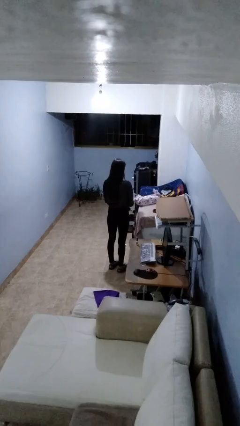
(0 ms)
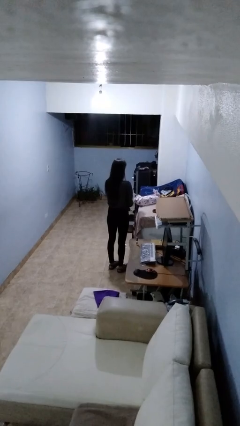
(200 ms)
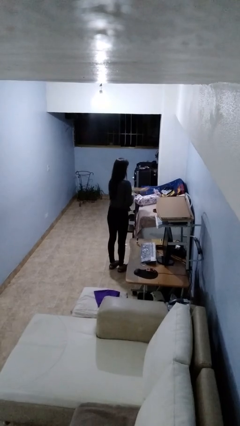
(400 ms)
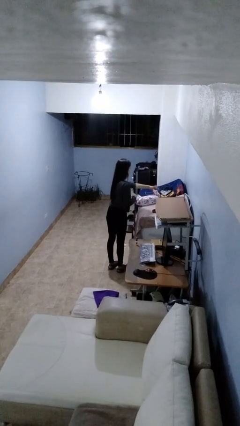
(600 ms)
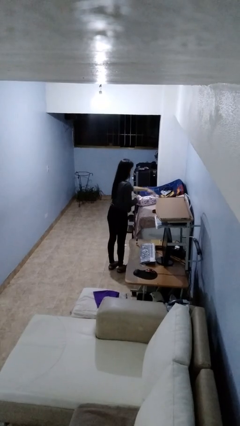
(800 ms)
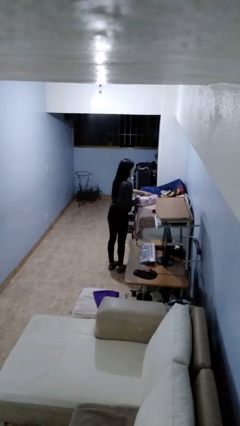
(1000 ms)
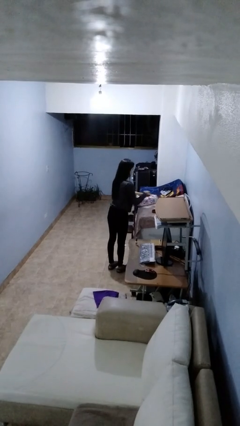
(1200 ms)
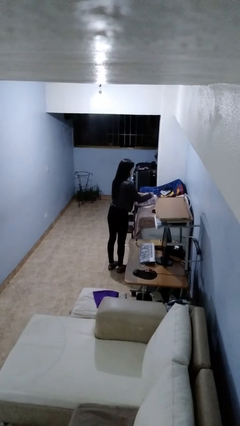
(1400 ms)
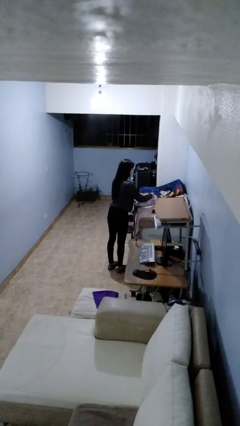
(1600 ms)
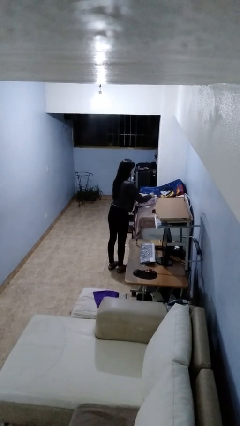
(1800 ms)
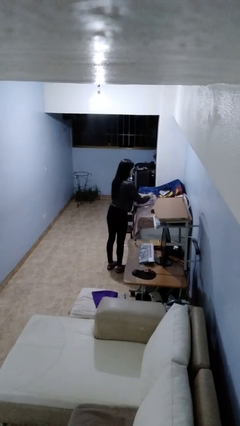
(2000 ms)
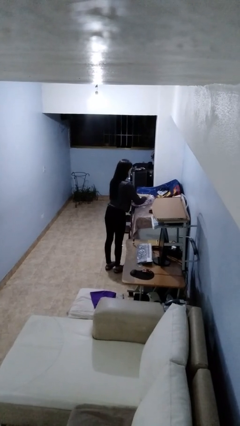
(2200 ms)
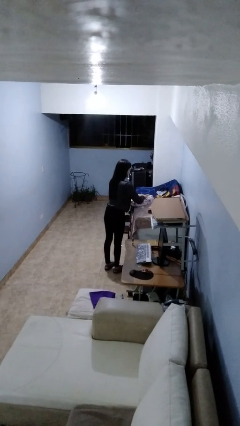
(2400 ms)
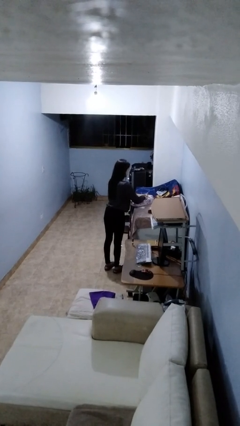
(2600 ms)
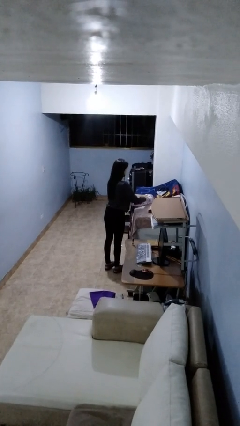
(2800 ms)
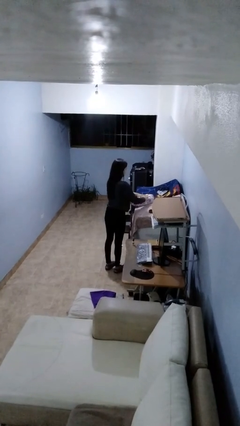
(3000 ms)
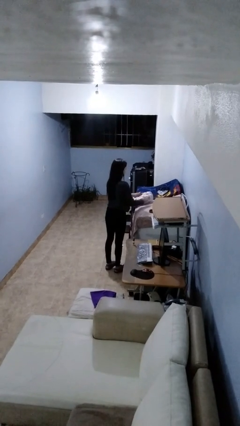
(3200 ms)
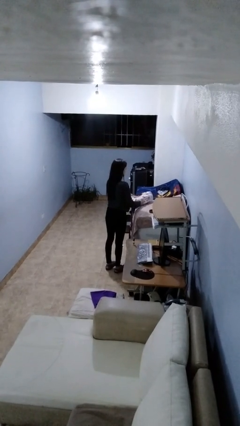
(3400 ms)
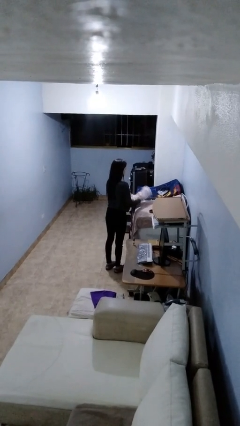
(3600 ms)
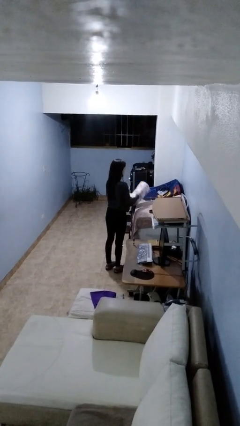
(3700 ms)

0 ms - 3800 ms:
person wraps box

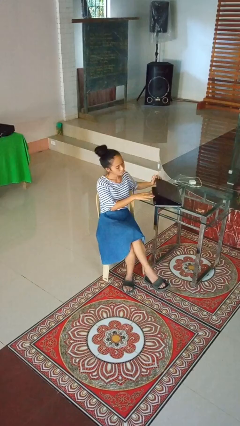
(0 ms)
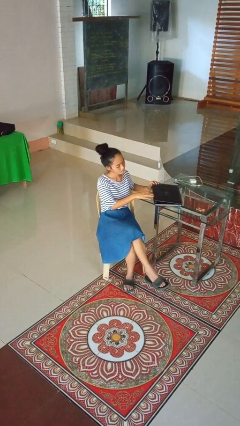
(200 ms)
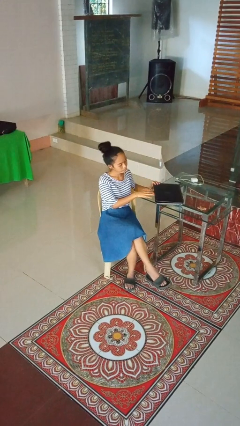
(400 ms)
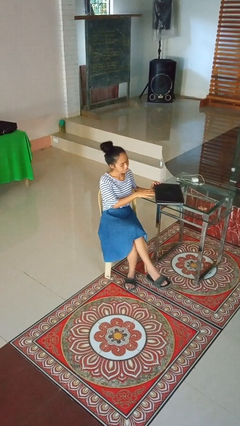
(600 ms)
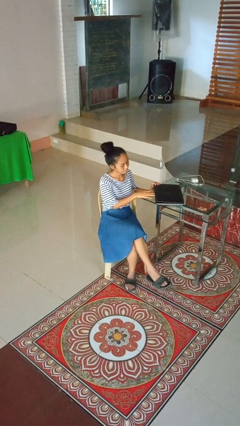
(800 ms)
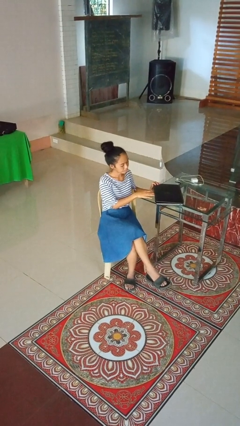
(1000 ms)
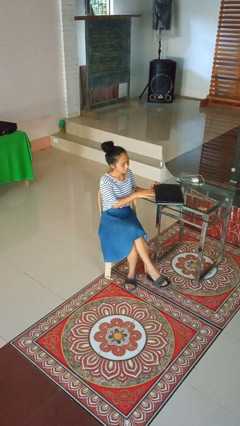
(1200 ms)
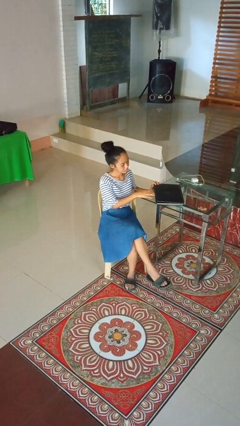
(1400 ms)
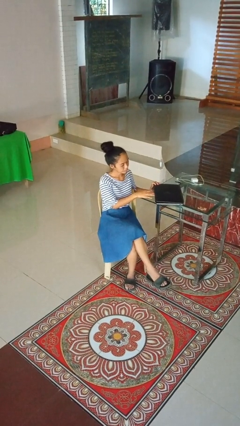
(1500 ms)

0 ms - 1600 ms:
person closes laptop

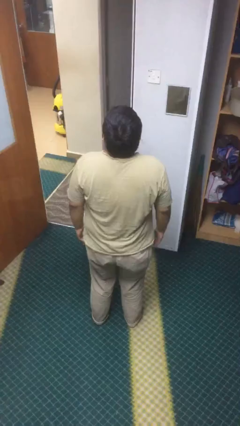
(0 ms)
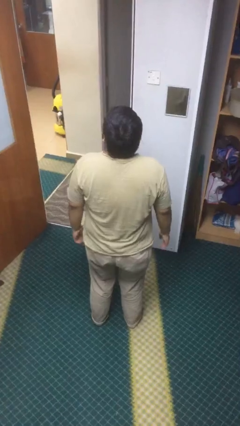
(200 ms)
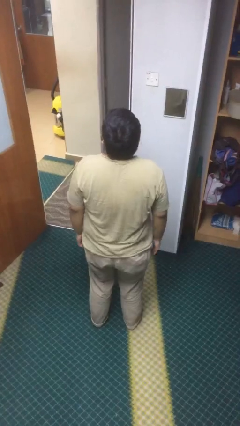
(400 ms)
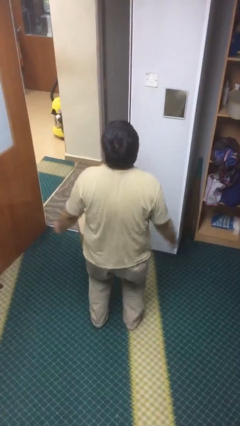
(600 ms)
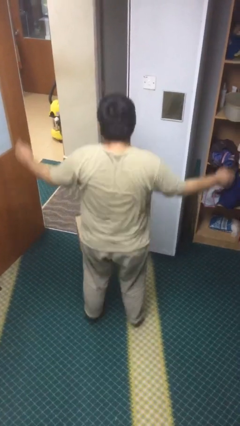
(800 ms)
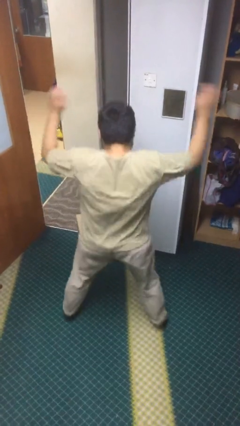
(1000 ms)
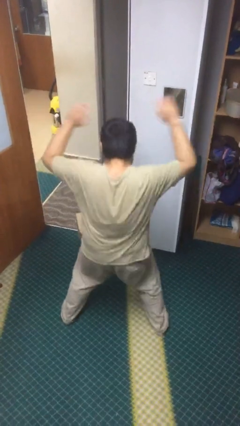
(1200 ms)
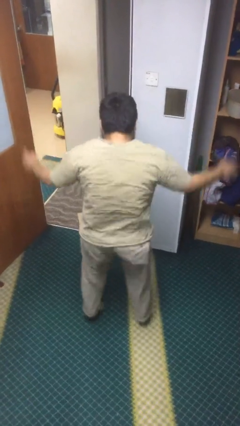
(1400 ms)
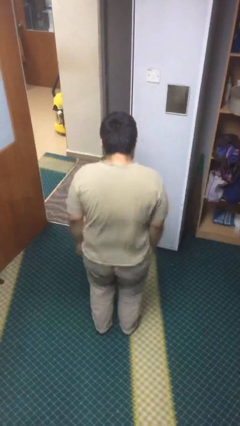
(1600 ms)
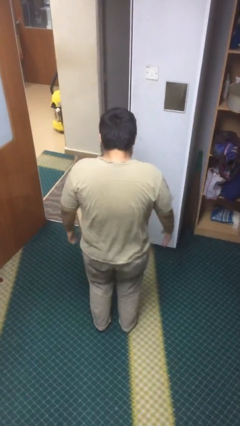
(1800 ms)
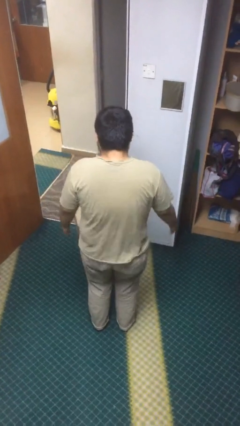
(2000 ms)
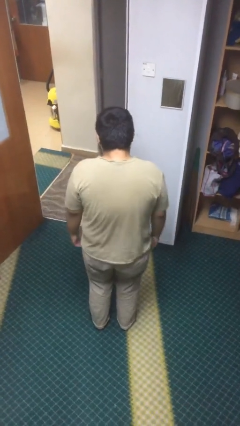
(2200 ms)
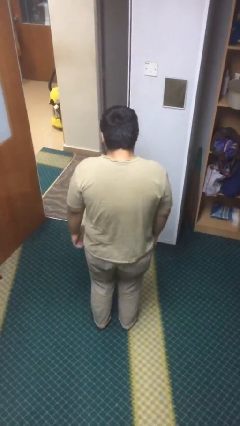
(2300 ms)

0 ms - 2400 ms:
person exercises with jumping jacks

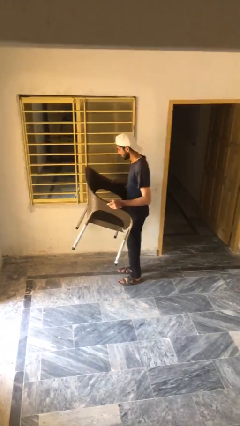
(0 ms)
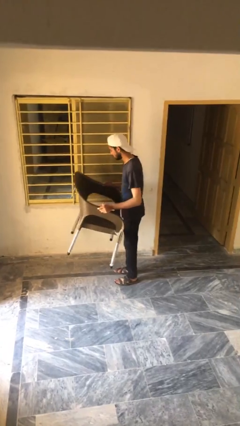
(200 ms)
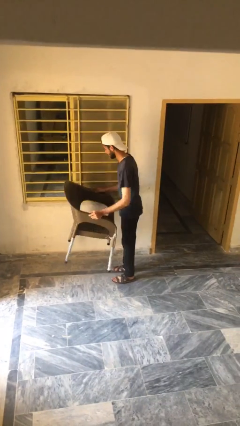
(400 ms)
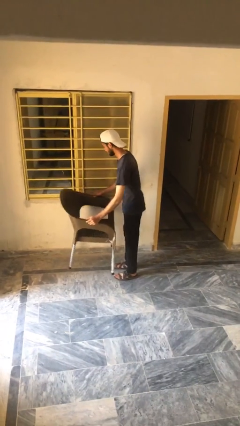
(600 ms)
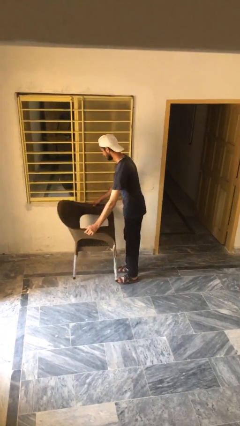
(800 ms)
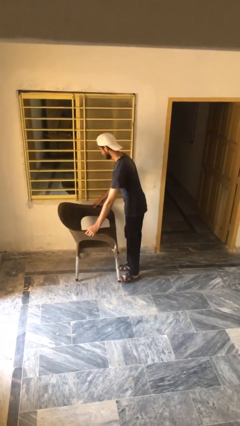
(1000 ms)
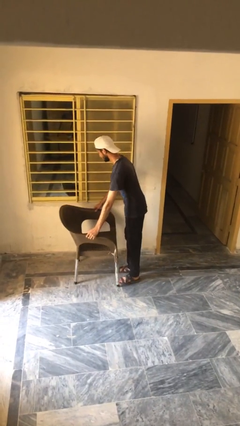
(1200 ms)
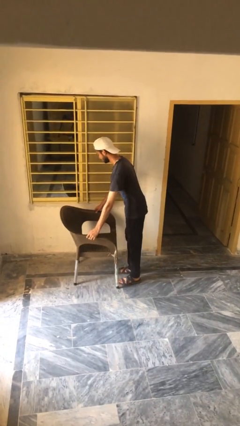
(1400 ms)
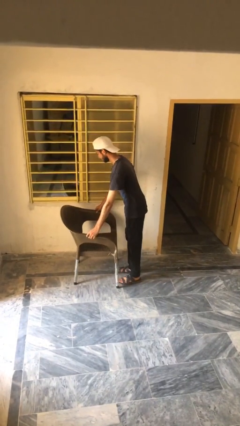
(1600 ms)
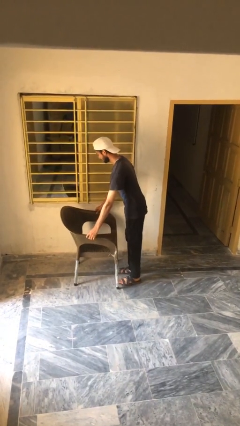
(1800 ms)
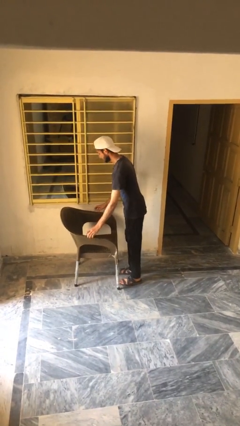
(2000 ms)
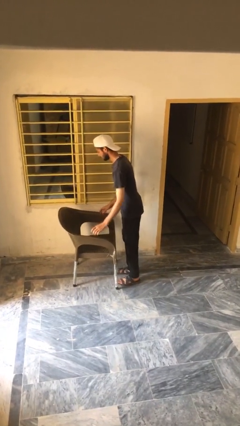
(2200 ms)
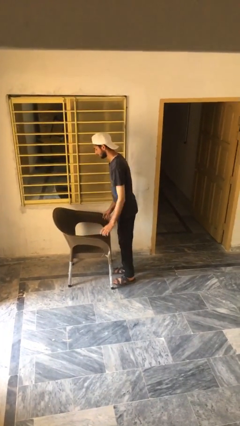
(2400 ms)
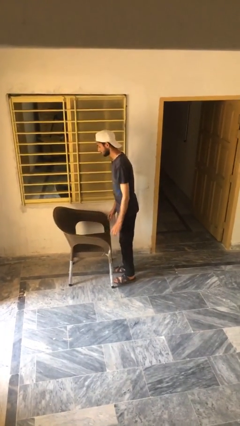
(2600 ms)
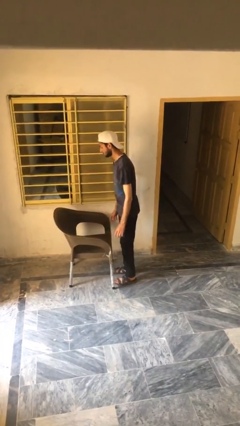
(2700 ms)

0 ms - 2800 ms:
person puts down object on floor

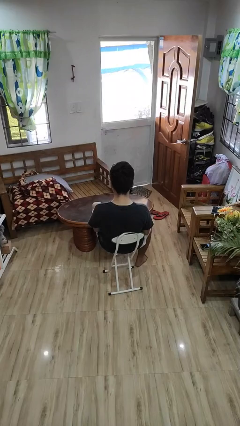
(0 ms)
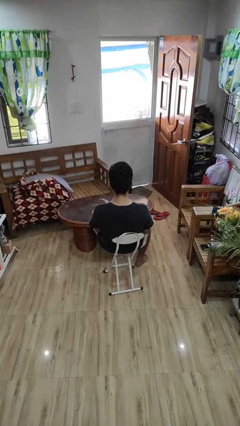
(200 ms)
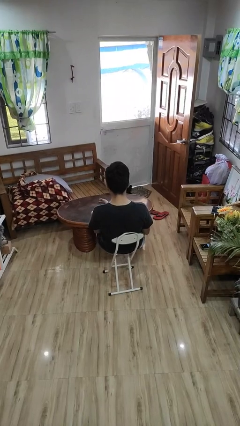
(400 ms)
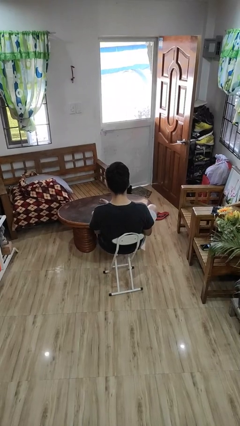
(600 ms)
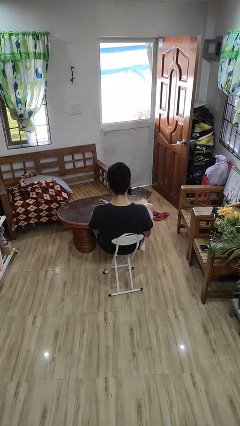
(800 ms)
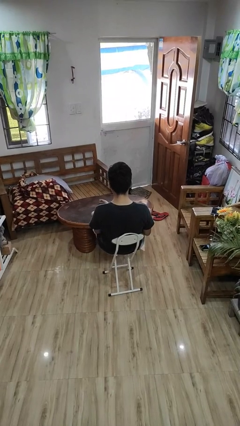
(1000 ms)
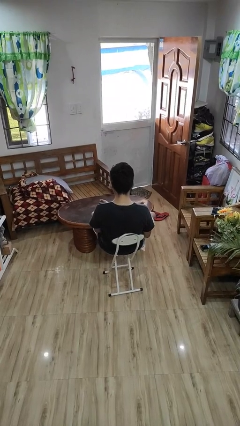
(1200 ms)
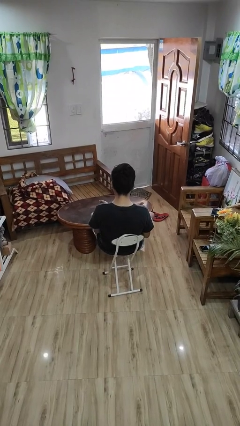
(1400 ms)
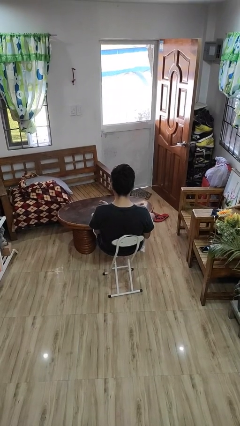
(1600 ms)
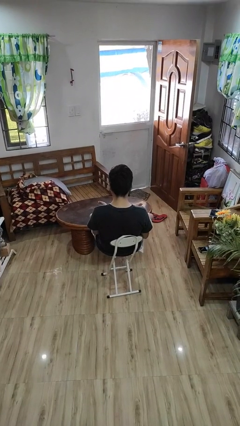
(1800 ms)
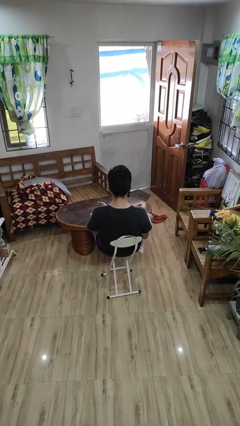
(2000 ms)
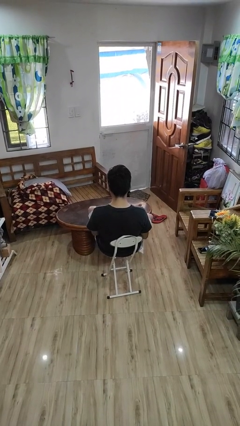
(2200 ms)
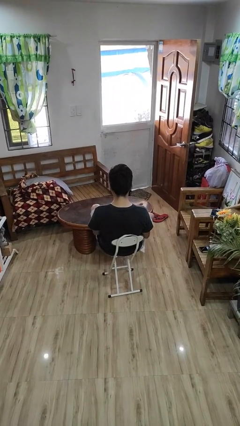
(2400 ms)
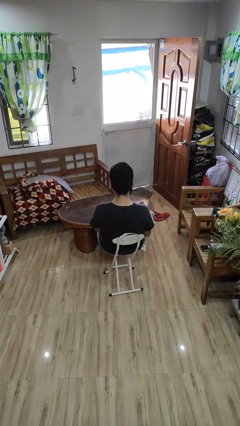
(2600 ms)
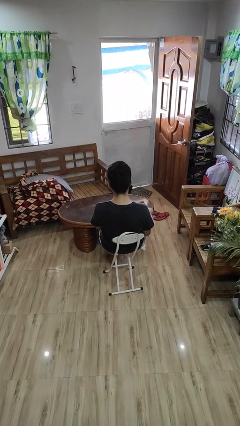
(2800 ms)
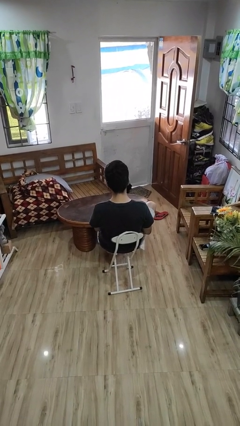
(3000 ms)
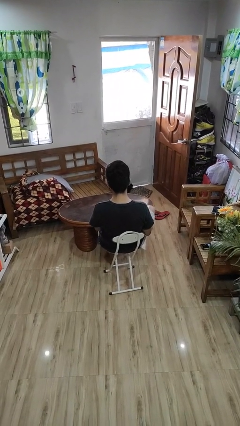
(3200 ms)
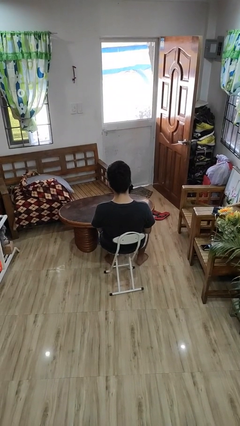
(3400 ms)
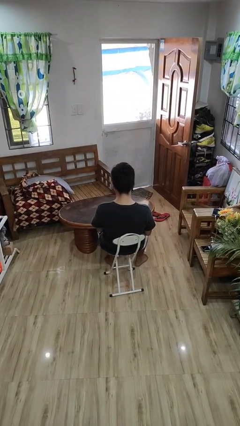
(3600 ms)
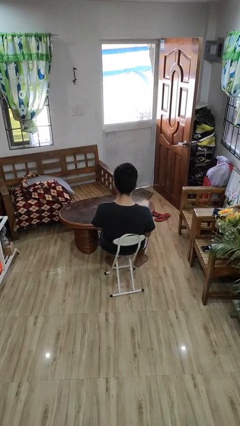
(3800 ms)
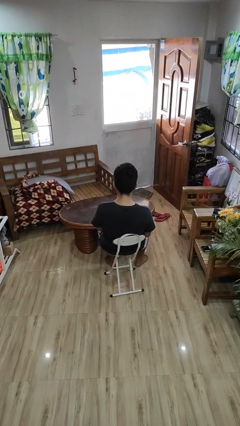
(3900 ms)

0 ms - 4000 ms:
person puts feet up

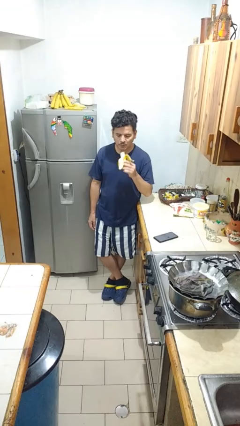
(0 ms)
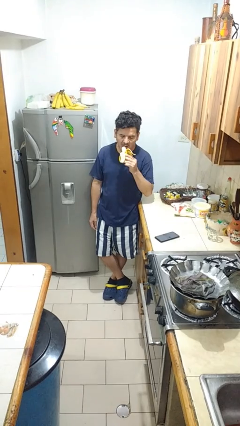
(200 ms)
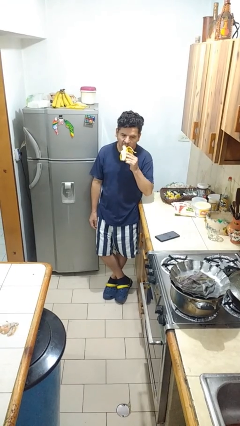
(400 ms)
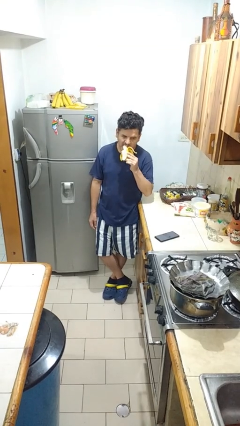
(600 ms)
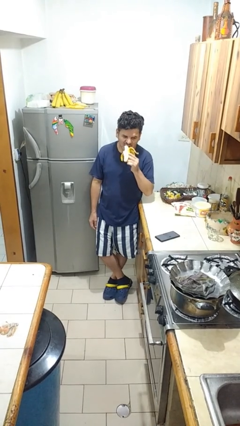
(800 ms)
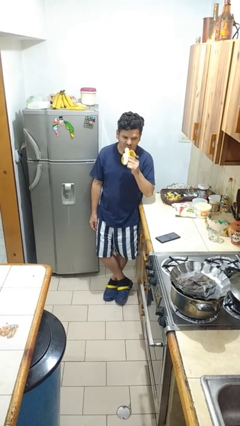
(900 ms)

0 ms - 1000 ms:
person eats banana

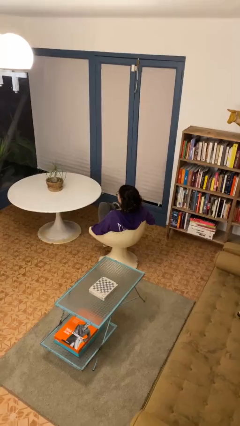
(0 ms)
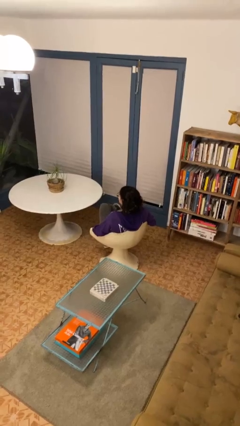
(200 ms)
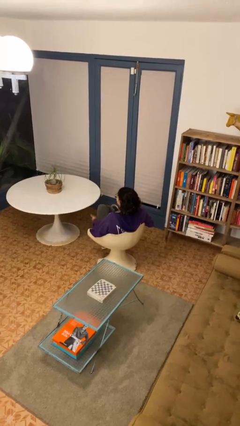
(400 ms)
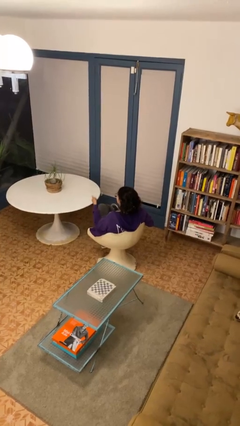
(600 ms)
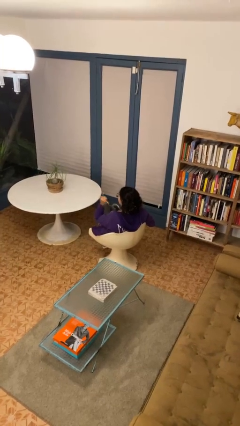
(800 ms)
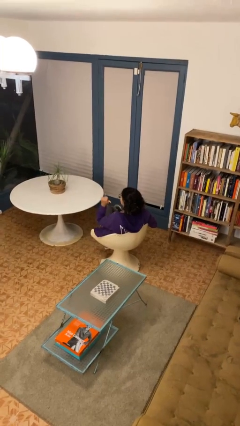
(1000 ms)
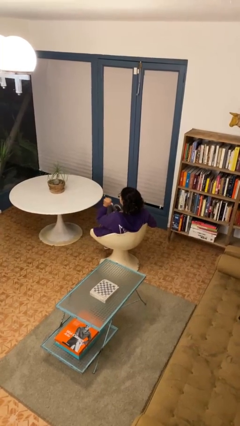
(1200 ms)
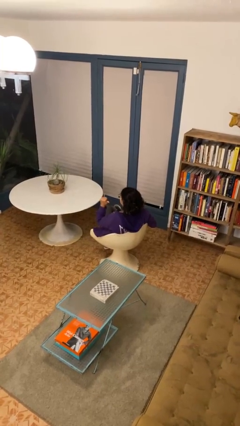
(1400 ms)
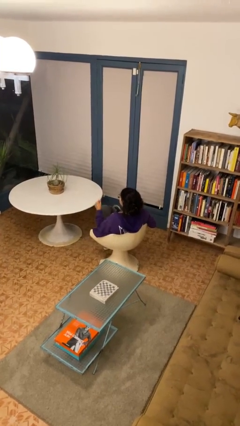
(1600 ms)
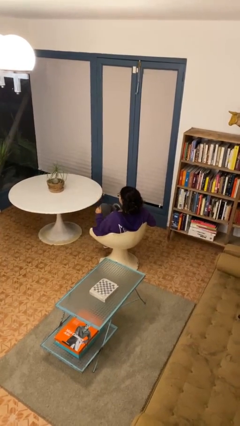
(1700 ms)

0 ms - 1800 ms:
person gestures behind me
